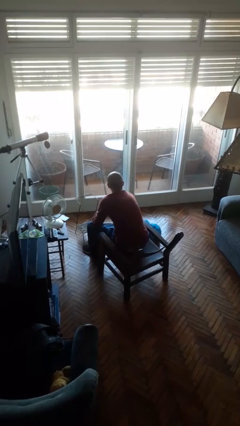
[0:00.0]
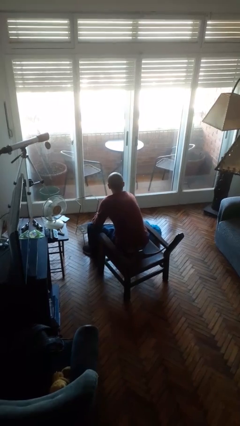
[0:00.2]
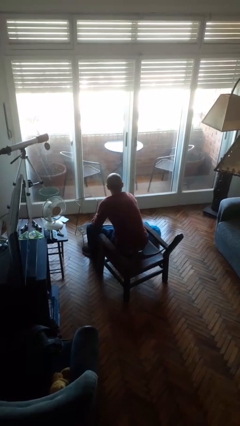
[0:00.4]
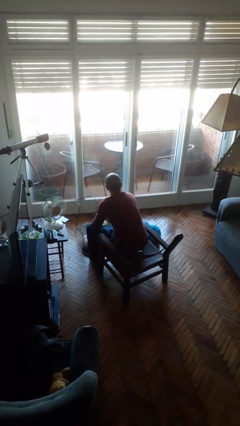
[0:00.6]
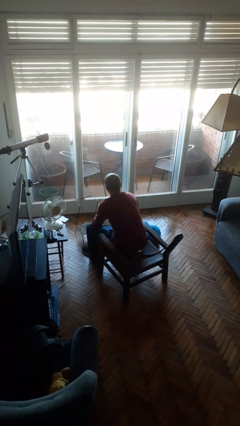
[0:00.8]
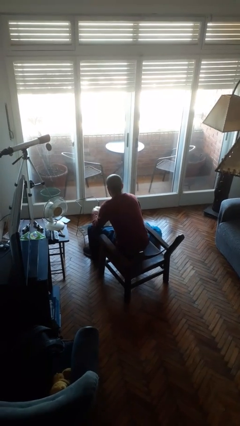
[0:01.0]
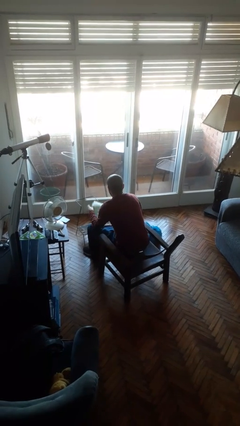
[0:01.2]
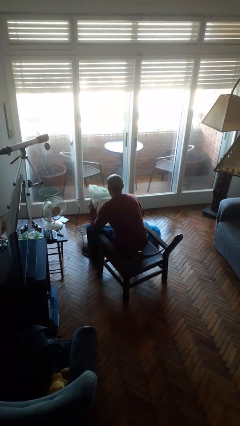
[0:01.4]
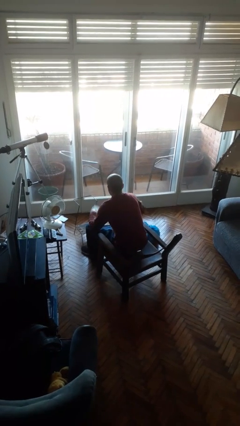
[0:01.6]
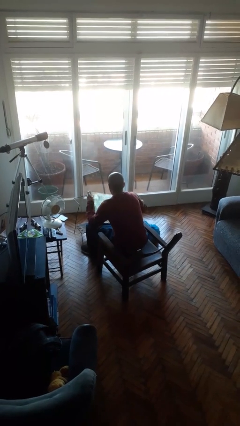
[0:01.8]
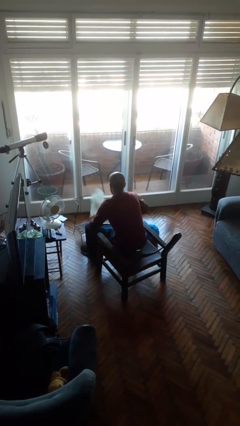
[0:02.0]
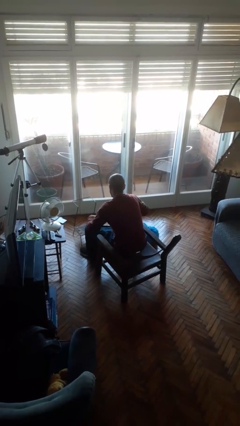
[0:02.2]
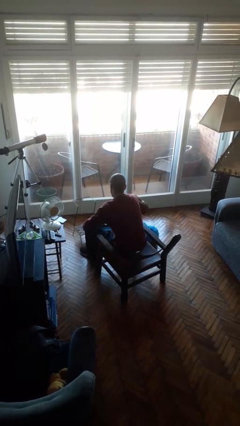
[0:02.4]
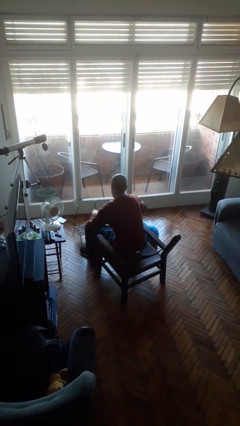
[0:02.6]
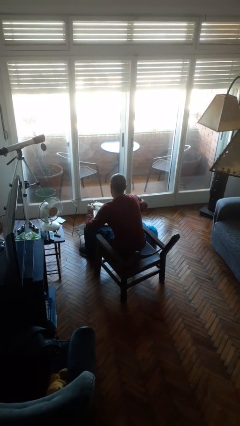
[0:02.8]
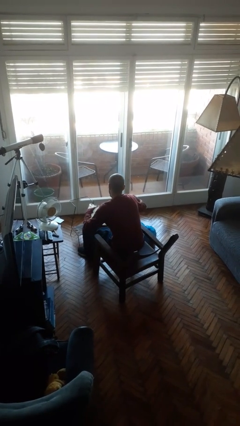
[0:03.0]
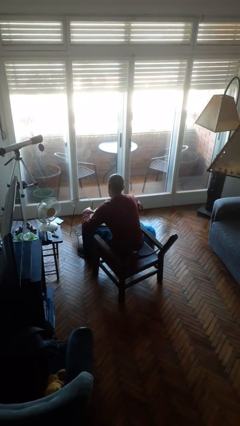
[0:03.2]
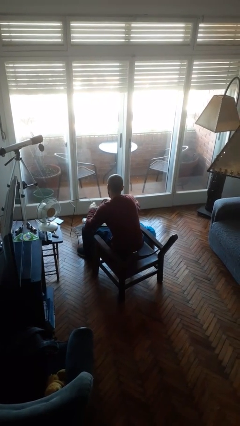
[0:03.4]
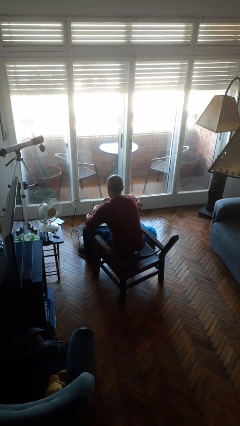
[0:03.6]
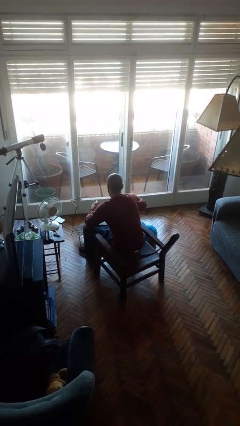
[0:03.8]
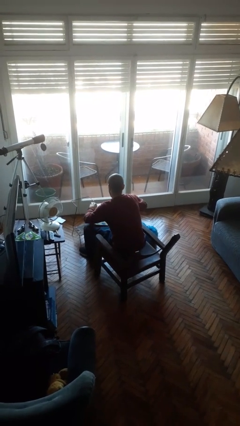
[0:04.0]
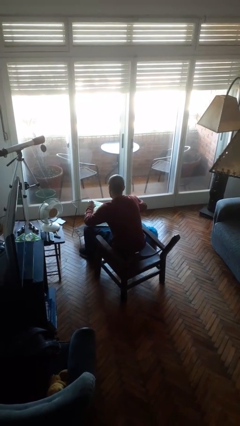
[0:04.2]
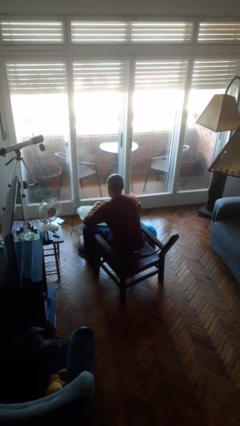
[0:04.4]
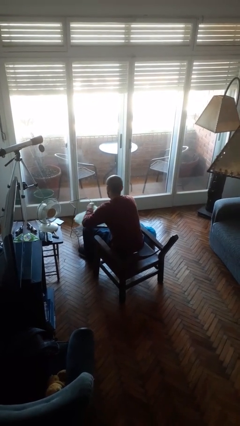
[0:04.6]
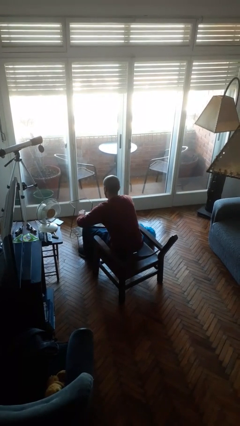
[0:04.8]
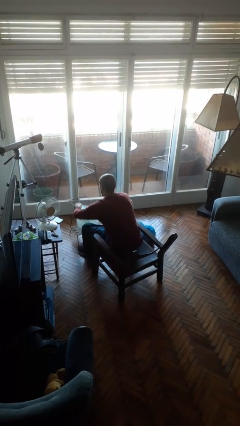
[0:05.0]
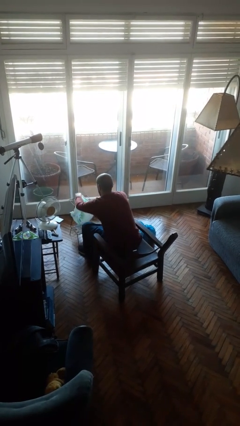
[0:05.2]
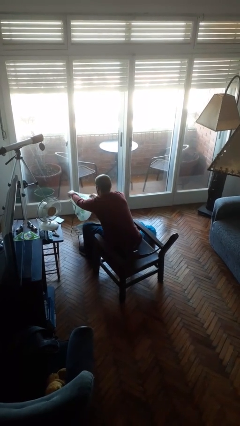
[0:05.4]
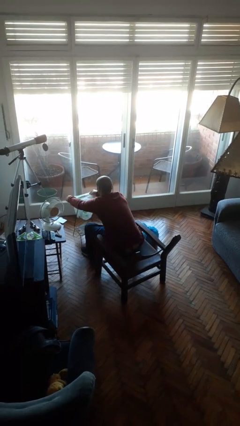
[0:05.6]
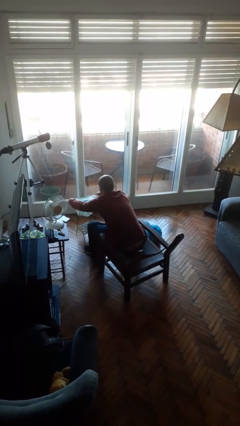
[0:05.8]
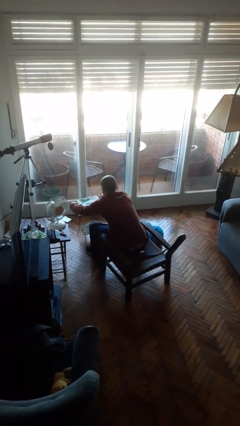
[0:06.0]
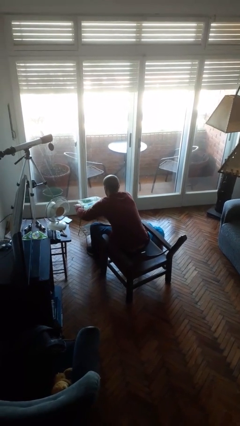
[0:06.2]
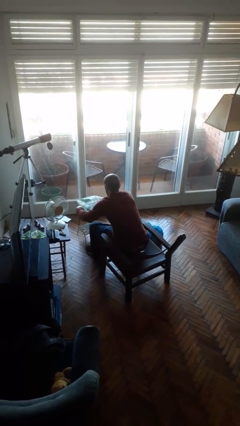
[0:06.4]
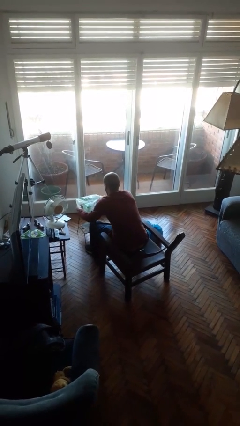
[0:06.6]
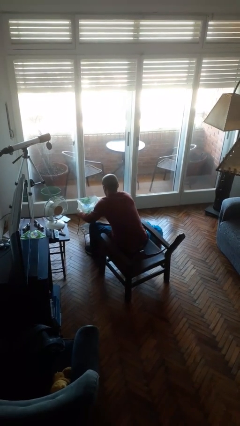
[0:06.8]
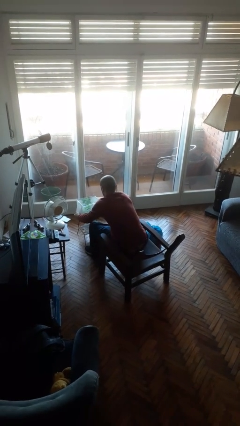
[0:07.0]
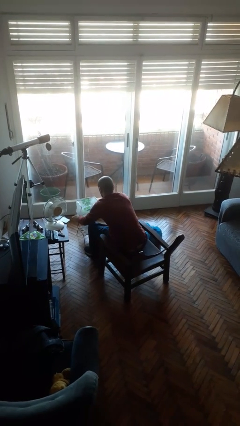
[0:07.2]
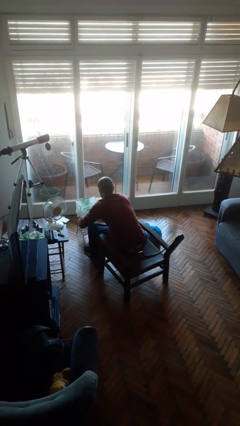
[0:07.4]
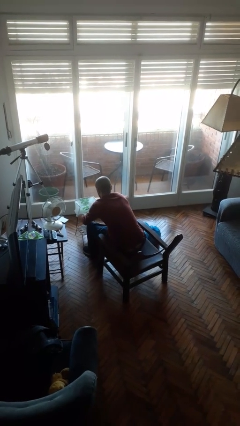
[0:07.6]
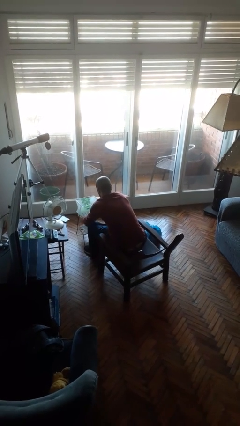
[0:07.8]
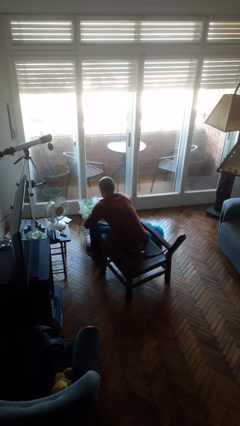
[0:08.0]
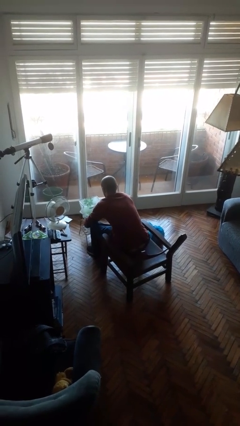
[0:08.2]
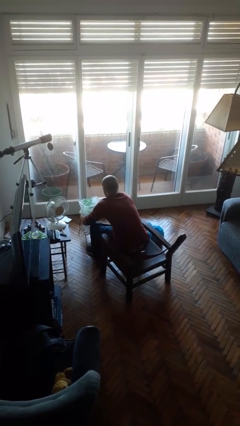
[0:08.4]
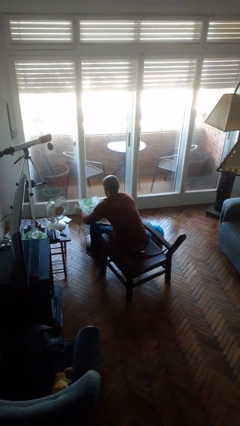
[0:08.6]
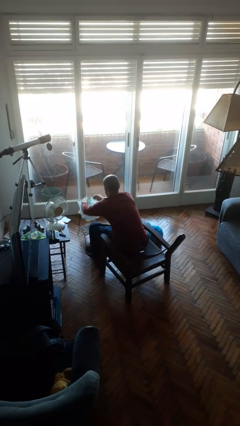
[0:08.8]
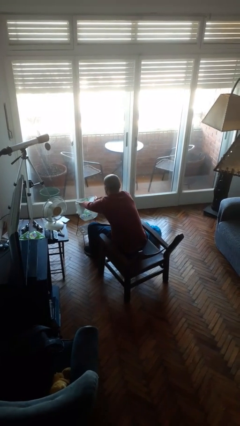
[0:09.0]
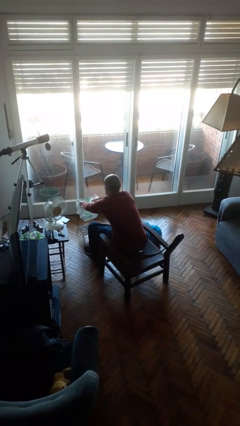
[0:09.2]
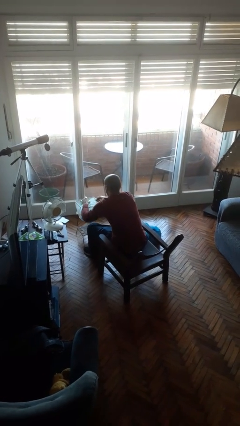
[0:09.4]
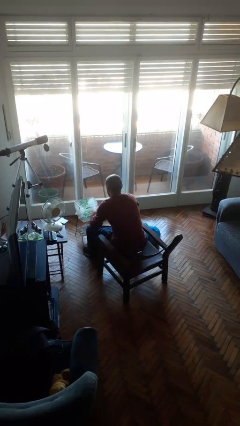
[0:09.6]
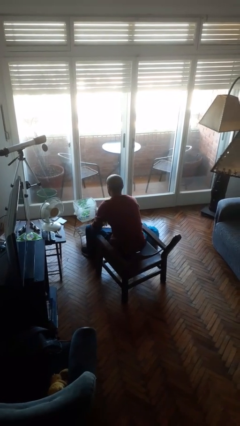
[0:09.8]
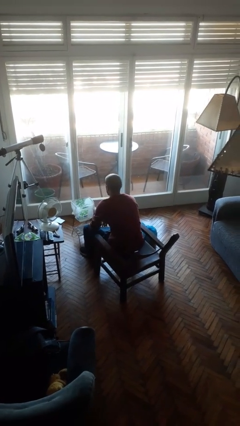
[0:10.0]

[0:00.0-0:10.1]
person inserts trashbag into trashcan

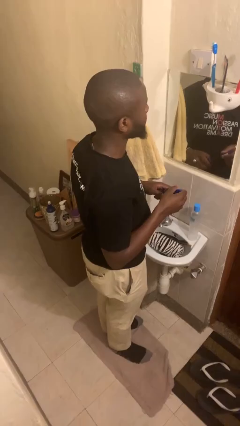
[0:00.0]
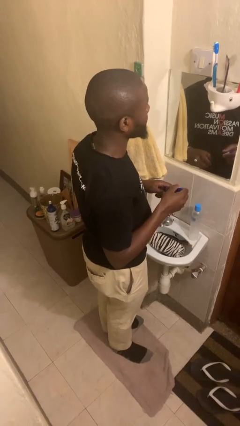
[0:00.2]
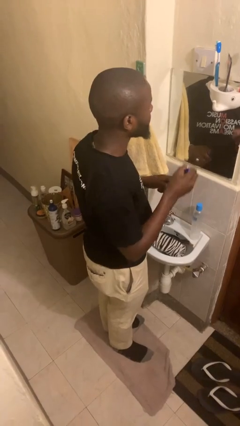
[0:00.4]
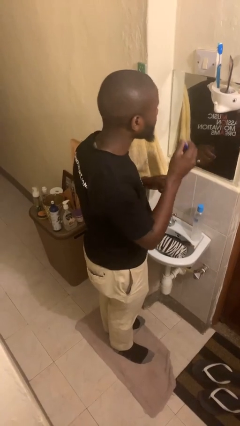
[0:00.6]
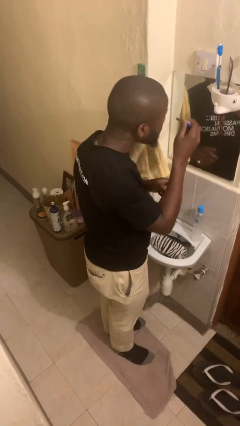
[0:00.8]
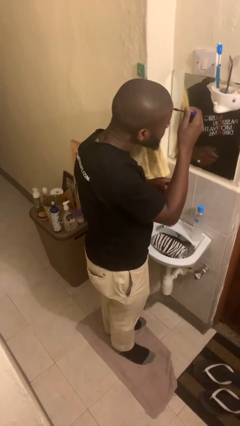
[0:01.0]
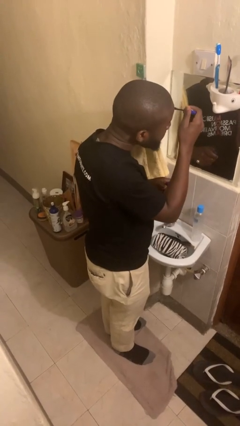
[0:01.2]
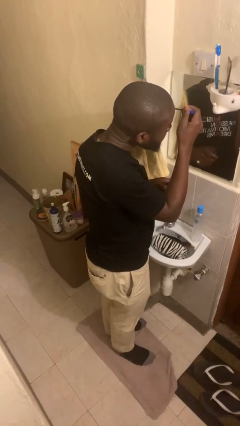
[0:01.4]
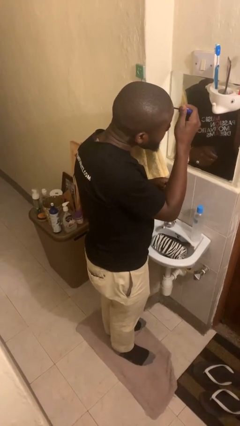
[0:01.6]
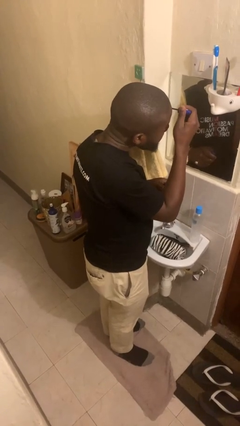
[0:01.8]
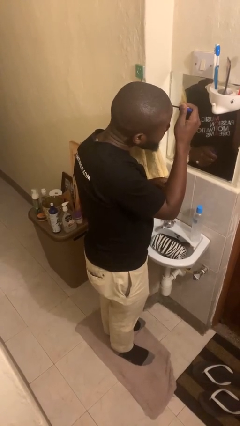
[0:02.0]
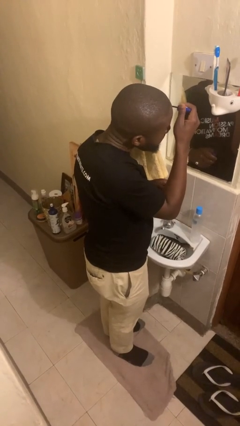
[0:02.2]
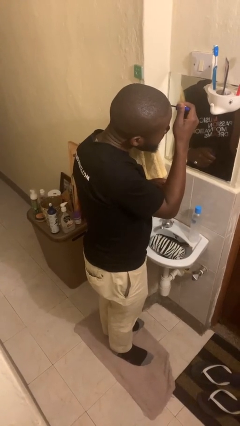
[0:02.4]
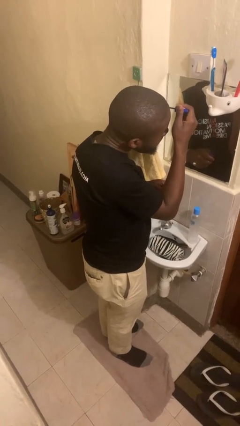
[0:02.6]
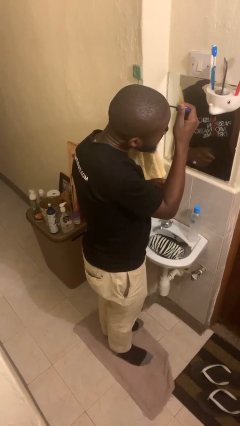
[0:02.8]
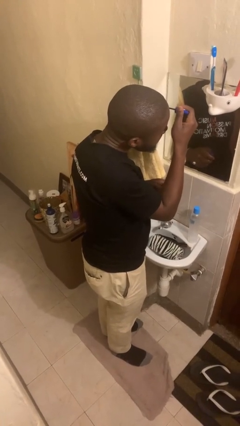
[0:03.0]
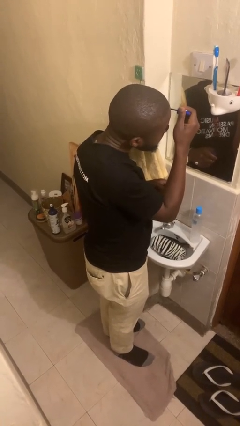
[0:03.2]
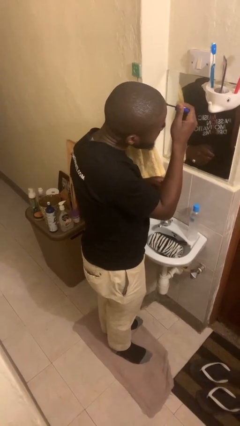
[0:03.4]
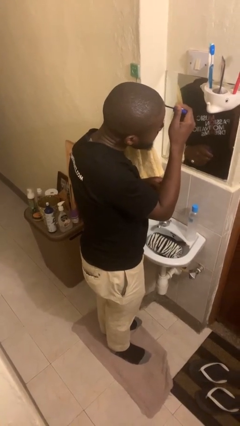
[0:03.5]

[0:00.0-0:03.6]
person applies eye makeup

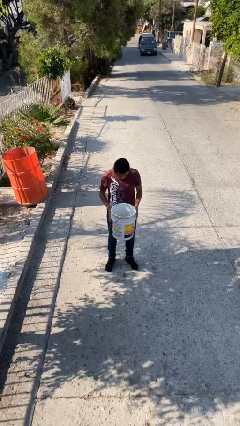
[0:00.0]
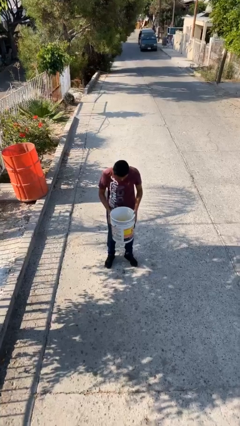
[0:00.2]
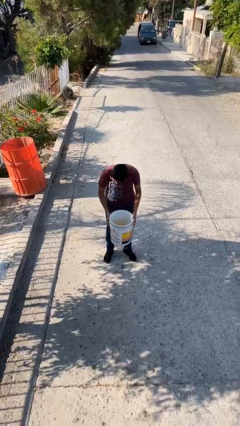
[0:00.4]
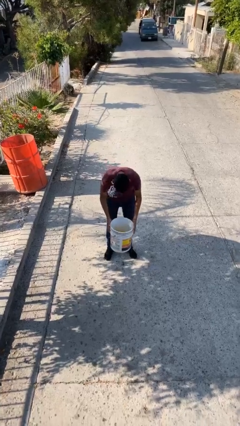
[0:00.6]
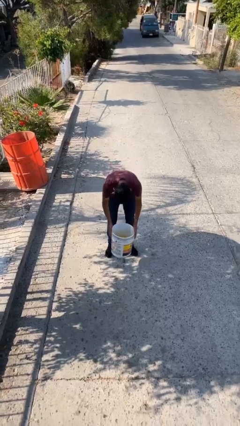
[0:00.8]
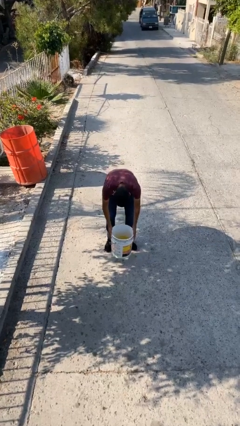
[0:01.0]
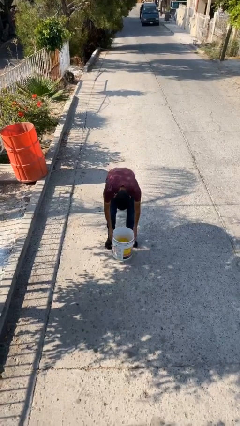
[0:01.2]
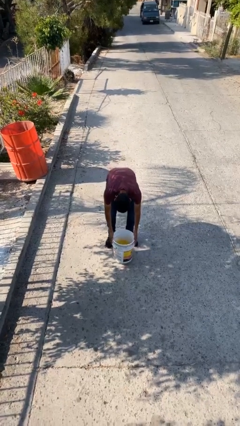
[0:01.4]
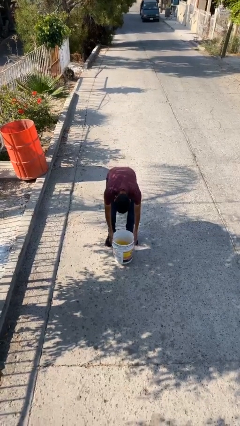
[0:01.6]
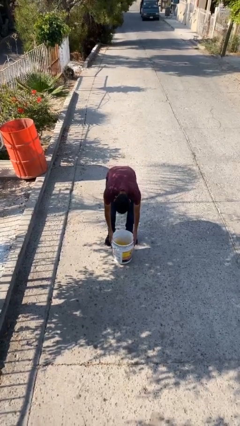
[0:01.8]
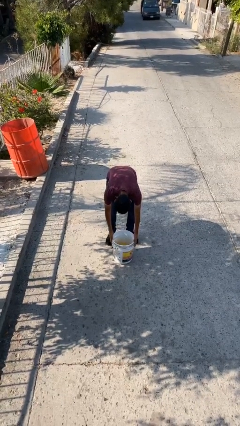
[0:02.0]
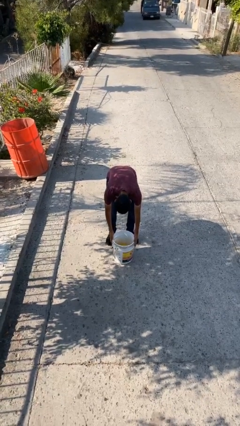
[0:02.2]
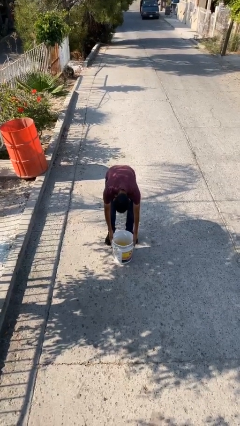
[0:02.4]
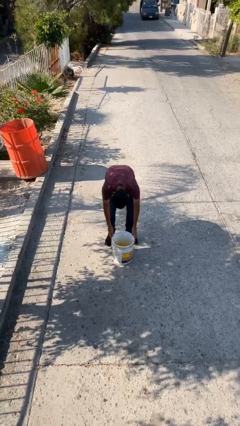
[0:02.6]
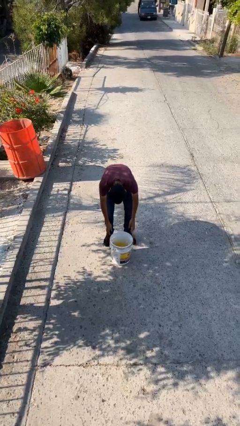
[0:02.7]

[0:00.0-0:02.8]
person puts down object on floor

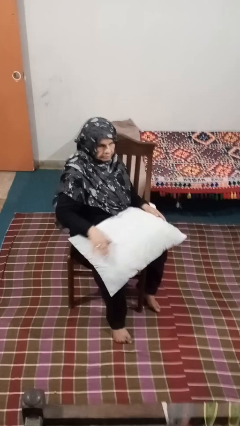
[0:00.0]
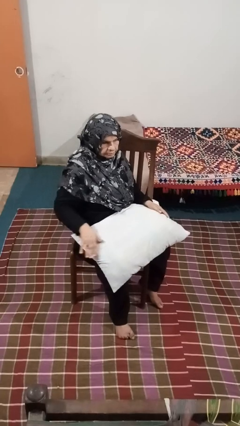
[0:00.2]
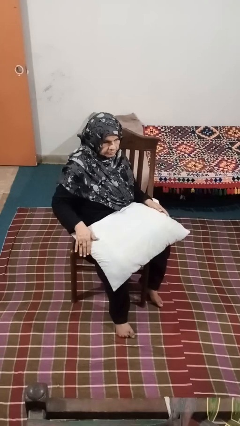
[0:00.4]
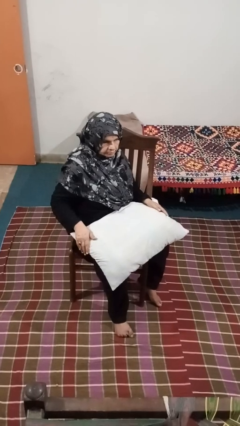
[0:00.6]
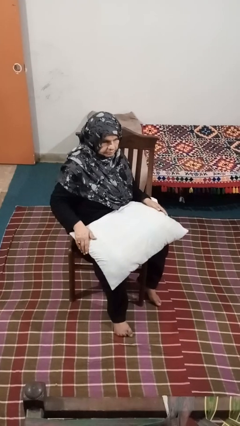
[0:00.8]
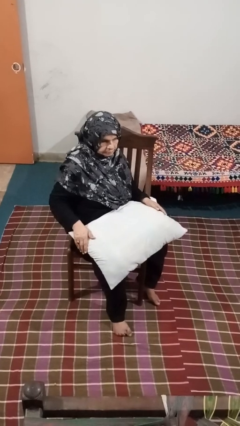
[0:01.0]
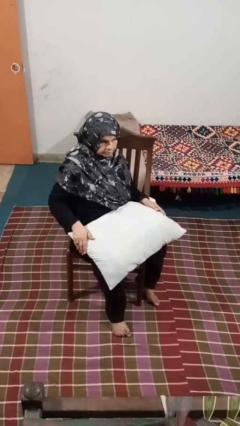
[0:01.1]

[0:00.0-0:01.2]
person waves hand over object
